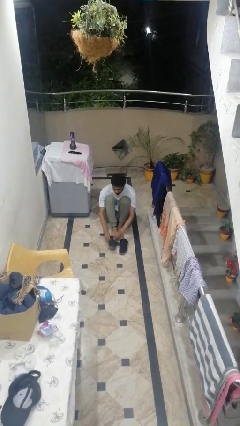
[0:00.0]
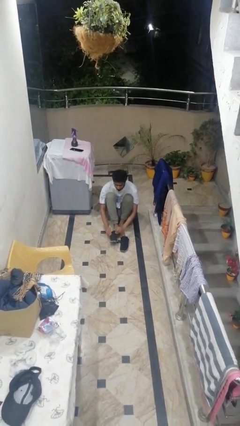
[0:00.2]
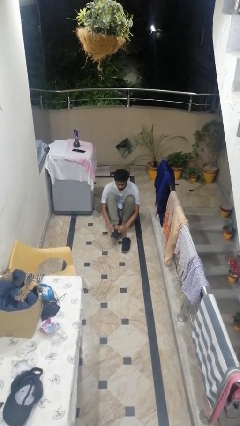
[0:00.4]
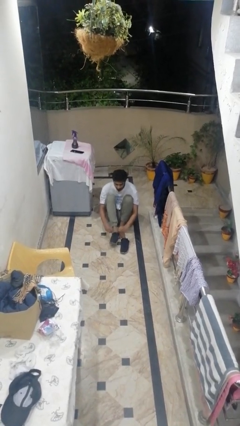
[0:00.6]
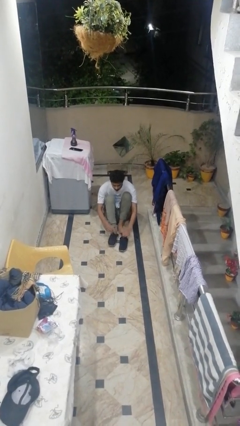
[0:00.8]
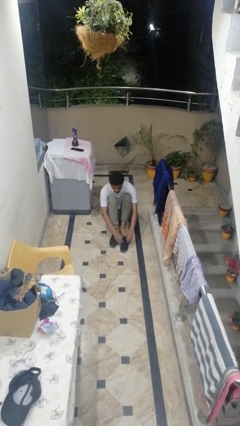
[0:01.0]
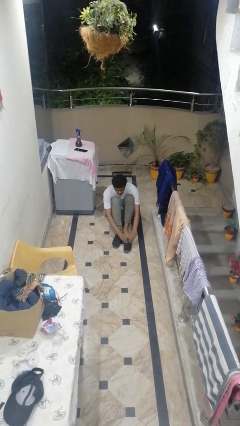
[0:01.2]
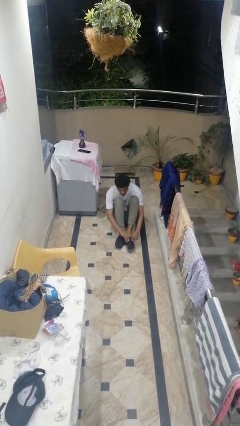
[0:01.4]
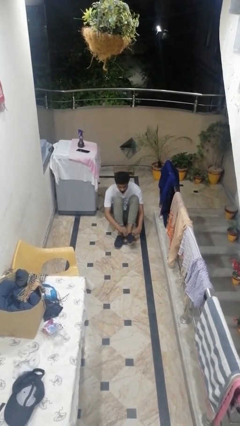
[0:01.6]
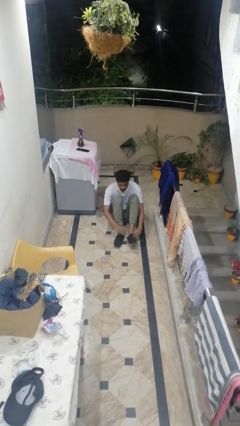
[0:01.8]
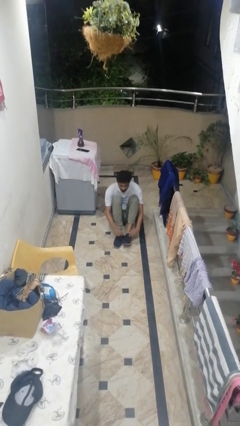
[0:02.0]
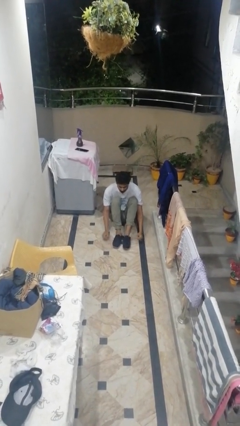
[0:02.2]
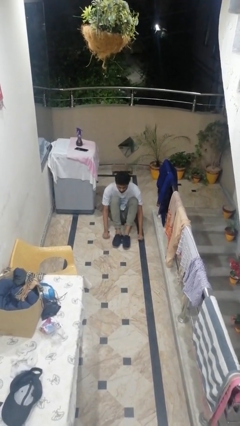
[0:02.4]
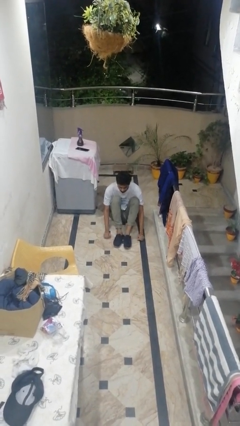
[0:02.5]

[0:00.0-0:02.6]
person puts on shoes

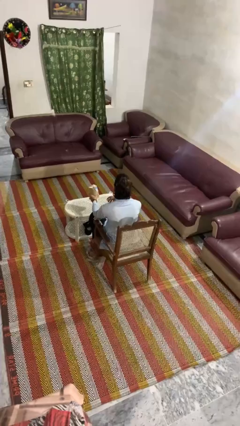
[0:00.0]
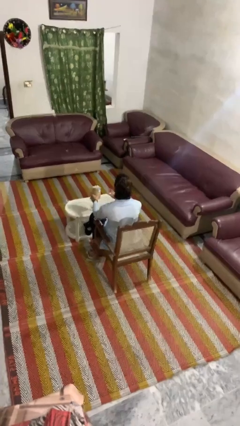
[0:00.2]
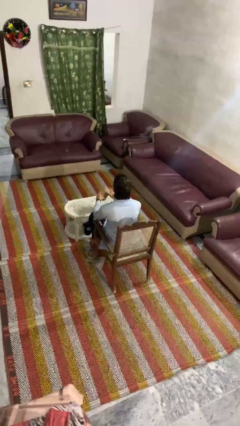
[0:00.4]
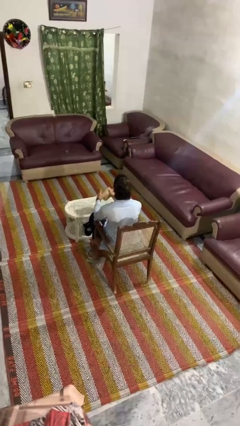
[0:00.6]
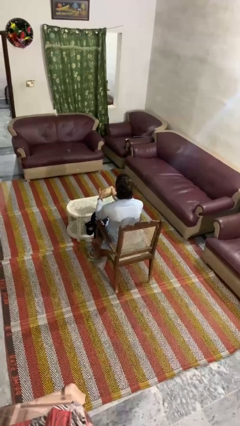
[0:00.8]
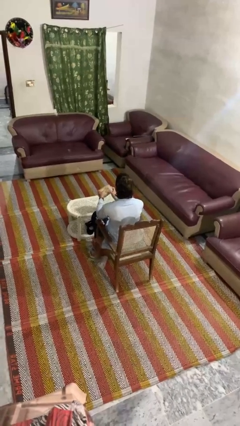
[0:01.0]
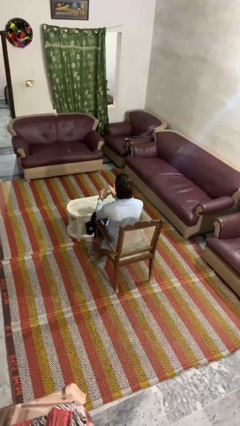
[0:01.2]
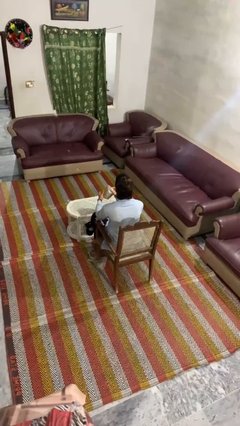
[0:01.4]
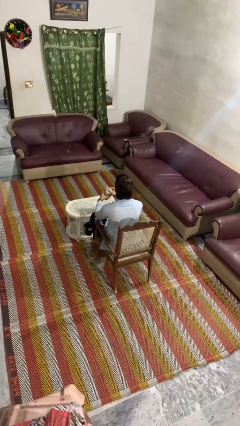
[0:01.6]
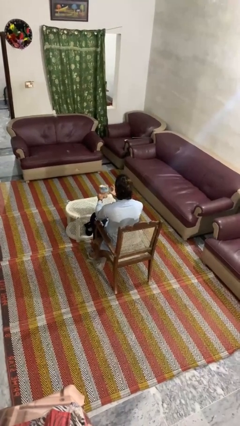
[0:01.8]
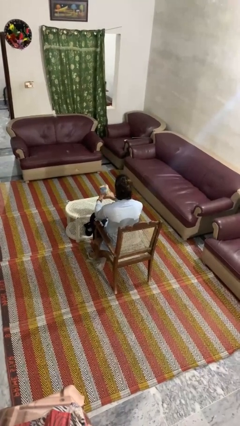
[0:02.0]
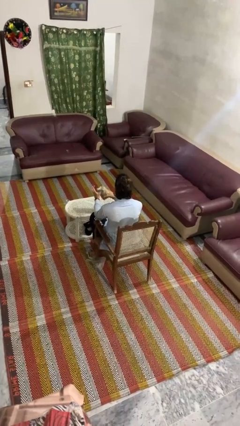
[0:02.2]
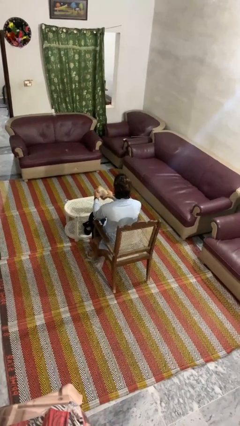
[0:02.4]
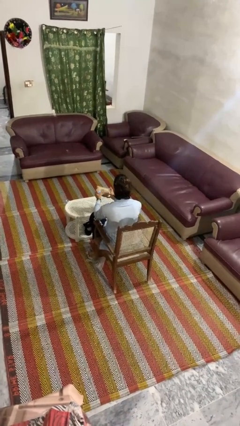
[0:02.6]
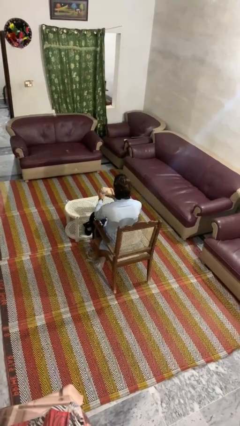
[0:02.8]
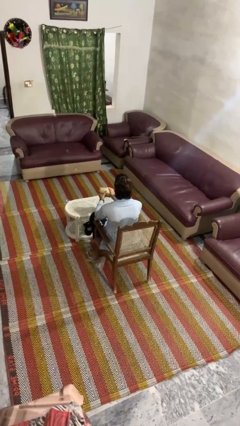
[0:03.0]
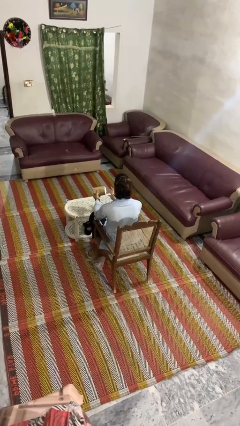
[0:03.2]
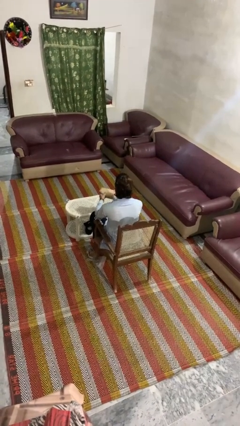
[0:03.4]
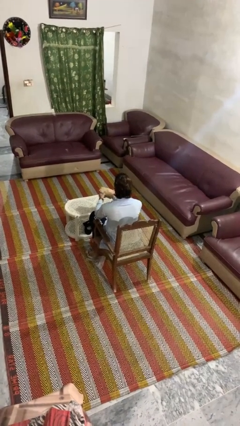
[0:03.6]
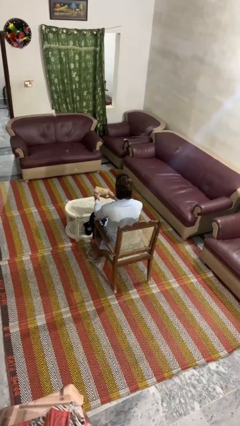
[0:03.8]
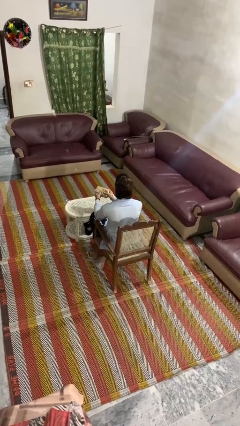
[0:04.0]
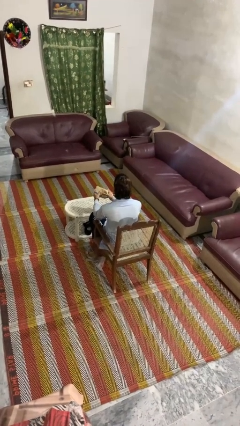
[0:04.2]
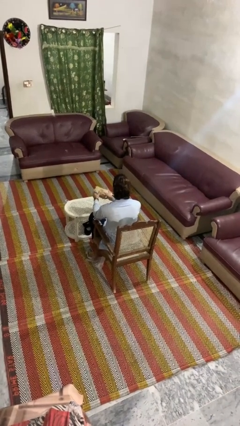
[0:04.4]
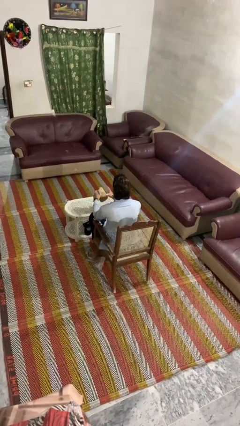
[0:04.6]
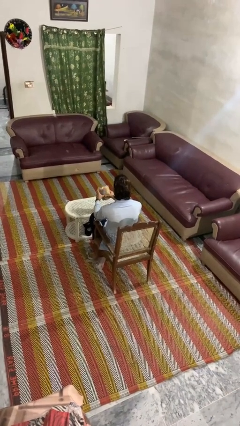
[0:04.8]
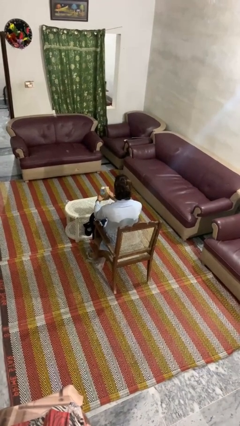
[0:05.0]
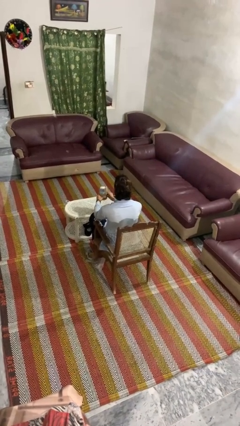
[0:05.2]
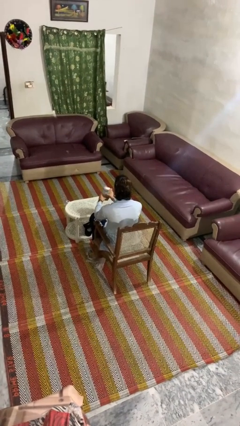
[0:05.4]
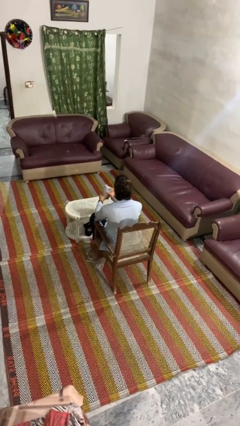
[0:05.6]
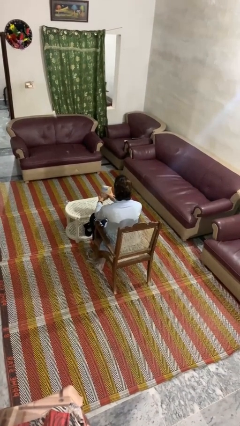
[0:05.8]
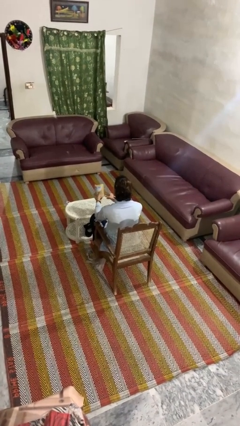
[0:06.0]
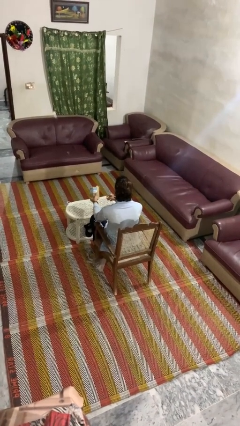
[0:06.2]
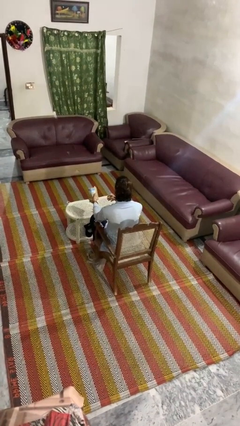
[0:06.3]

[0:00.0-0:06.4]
person squeezes object

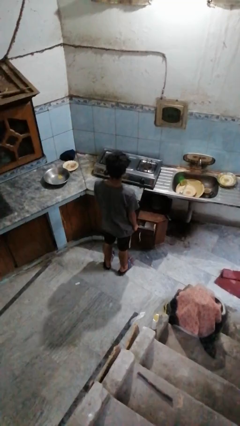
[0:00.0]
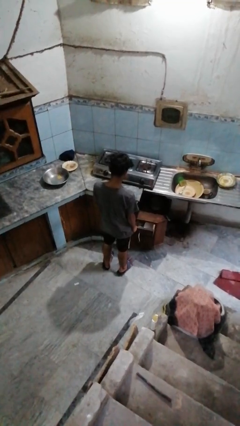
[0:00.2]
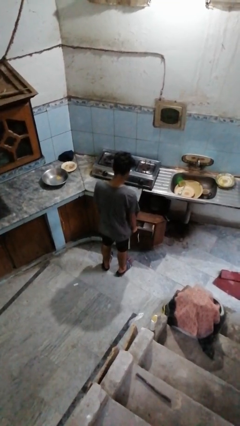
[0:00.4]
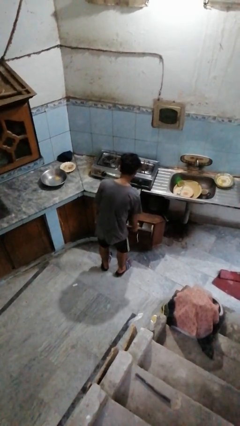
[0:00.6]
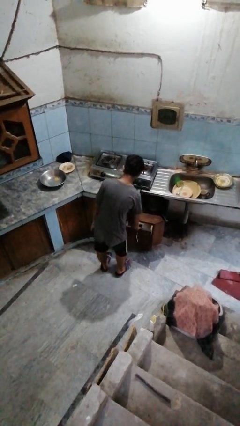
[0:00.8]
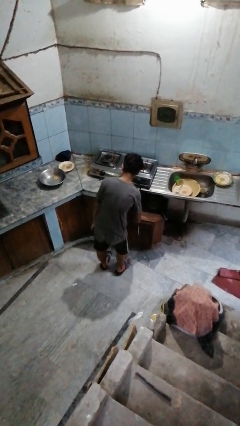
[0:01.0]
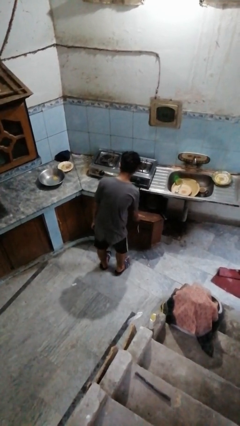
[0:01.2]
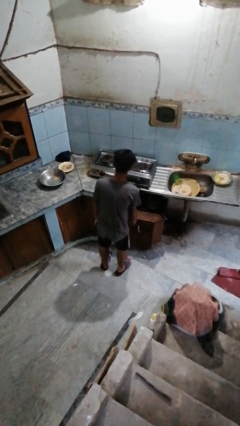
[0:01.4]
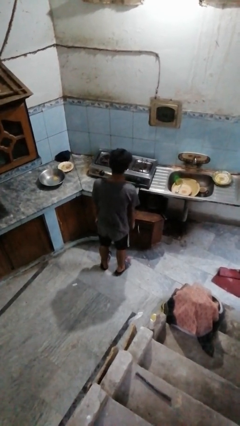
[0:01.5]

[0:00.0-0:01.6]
person closes kitchen drawer

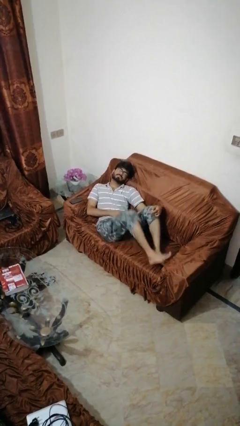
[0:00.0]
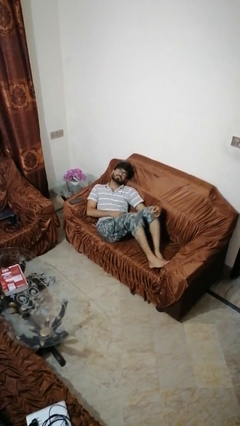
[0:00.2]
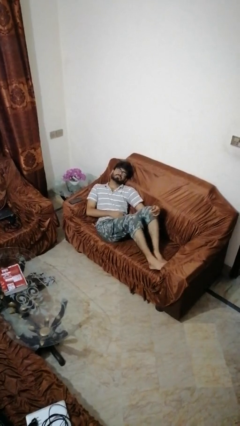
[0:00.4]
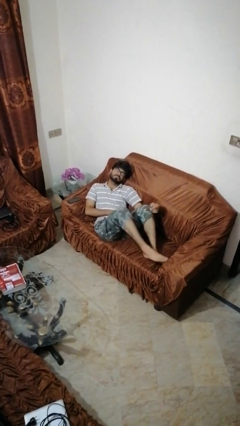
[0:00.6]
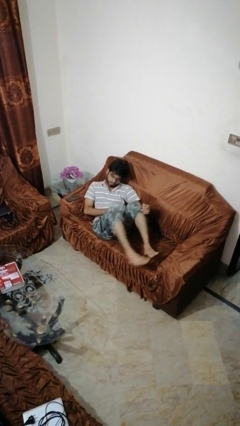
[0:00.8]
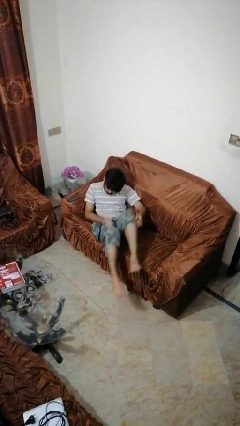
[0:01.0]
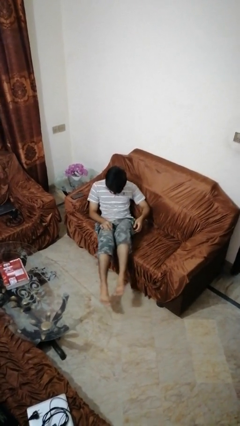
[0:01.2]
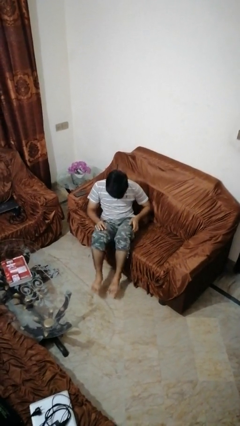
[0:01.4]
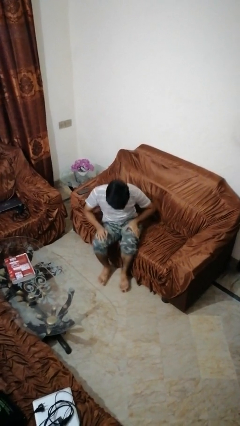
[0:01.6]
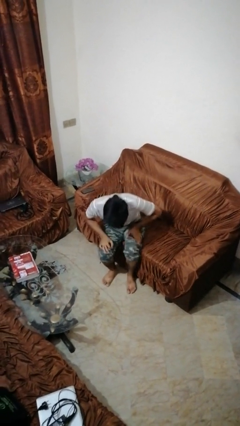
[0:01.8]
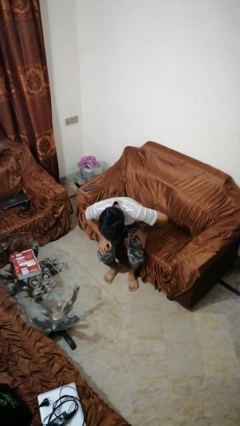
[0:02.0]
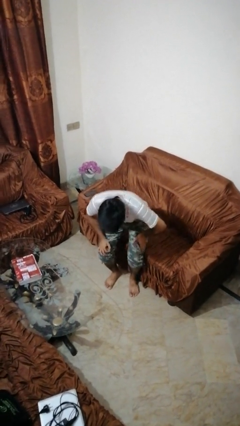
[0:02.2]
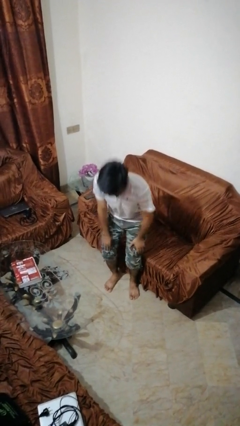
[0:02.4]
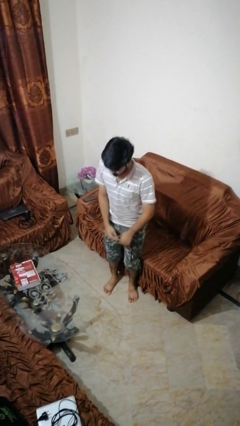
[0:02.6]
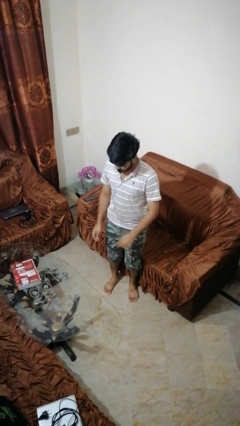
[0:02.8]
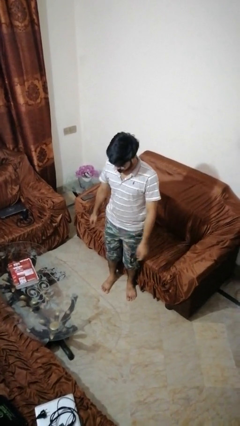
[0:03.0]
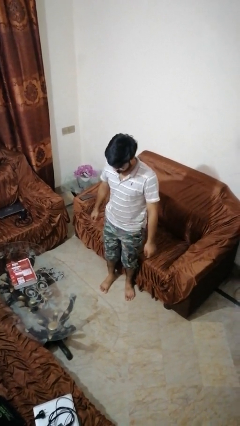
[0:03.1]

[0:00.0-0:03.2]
person stands up

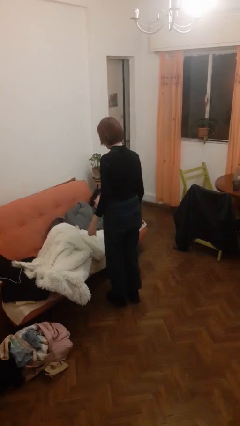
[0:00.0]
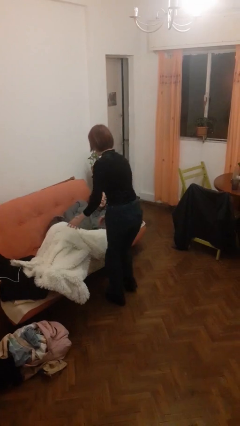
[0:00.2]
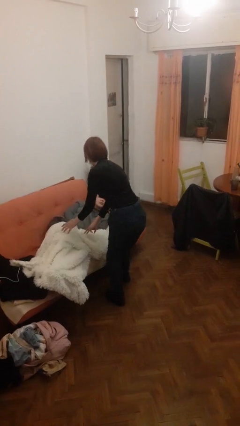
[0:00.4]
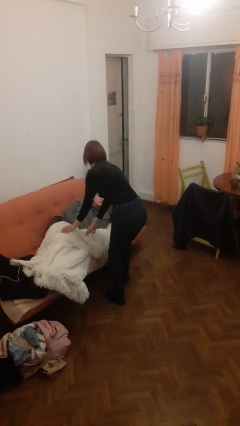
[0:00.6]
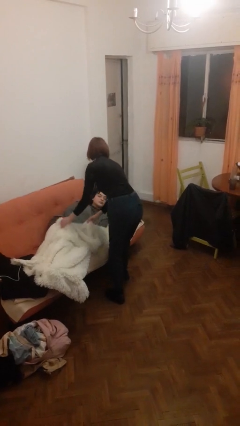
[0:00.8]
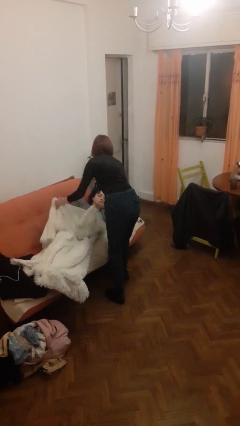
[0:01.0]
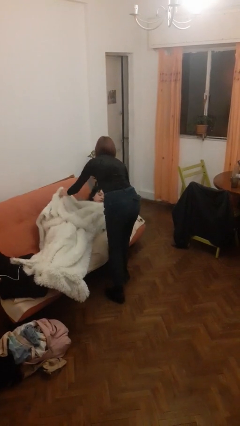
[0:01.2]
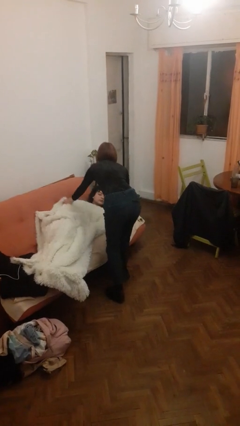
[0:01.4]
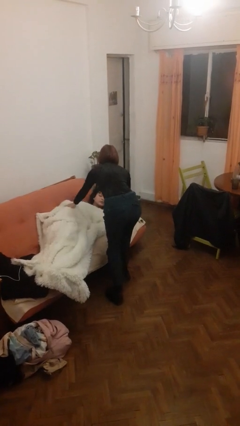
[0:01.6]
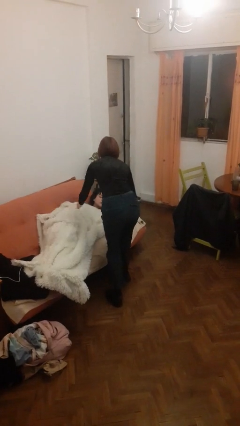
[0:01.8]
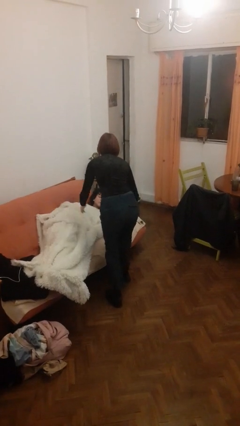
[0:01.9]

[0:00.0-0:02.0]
person covers friend with blanket

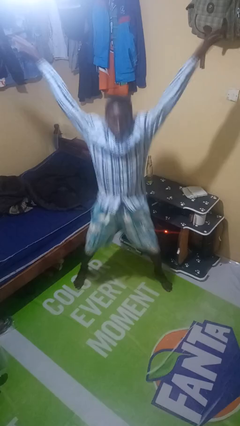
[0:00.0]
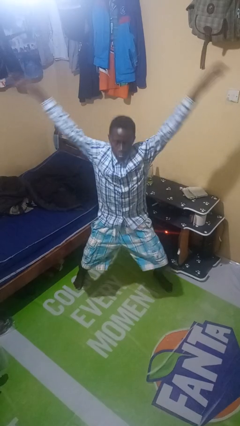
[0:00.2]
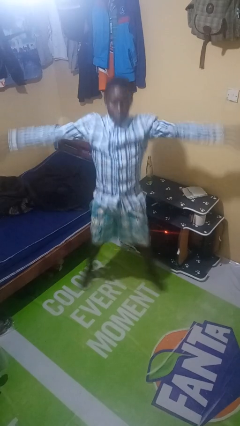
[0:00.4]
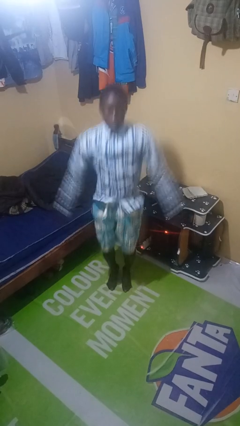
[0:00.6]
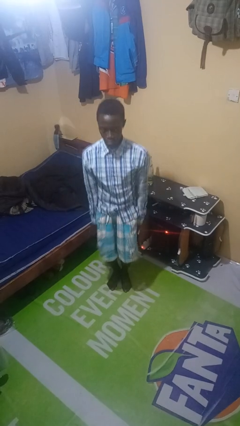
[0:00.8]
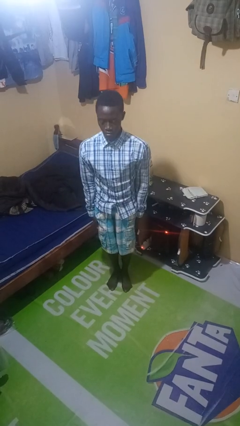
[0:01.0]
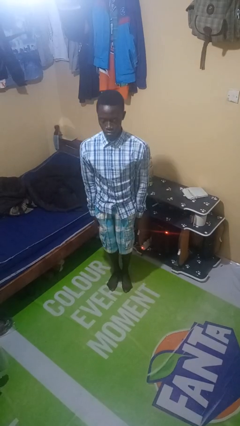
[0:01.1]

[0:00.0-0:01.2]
person exercises with jumping jacks

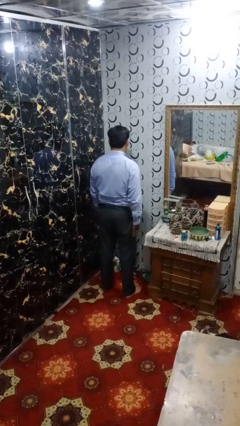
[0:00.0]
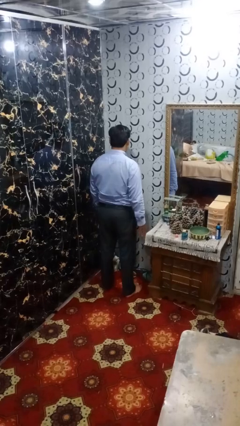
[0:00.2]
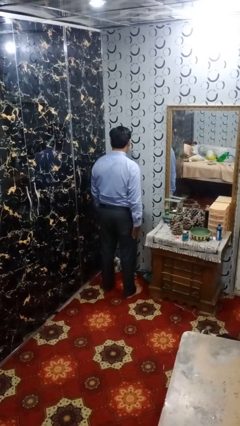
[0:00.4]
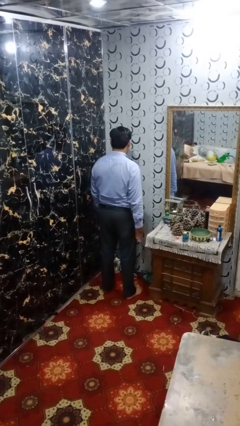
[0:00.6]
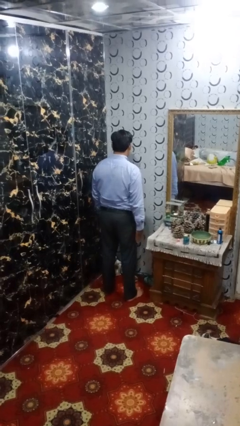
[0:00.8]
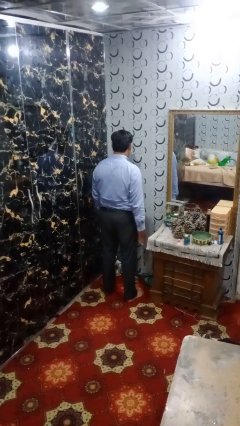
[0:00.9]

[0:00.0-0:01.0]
person slaps hands on thighs
